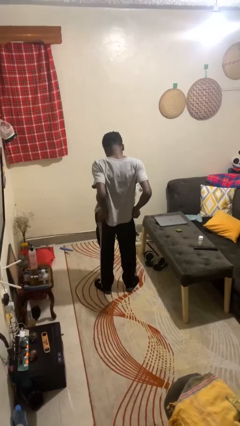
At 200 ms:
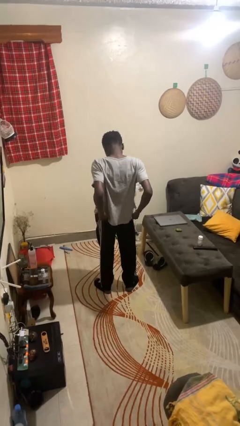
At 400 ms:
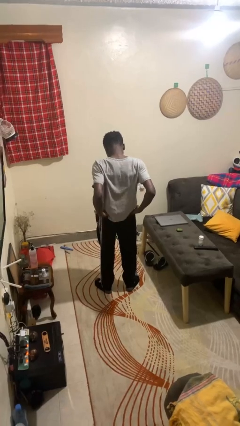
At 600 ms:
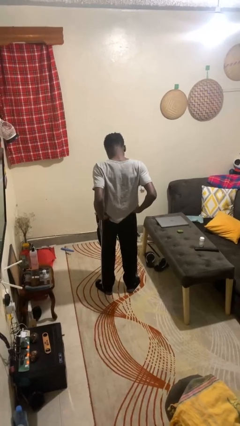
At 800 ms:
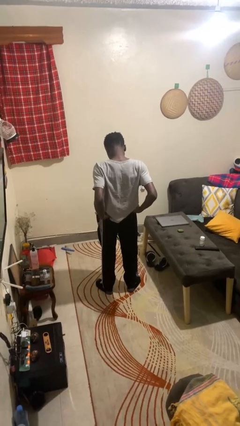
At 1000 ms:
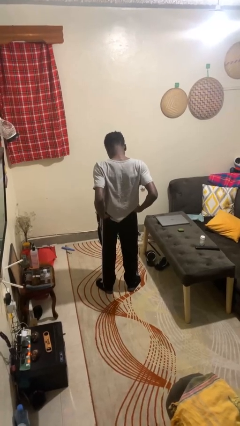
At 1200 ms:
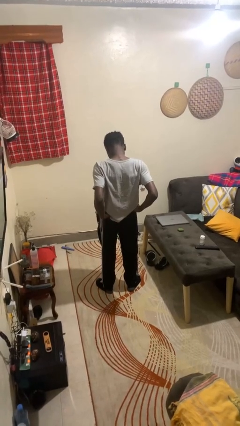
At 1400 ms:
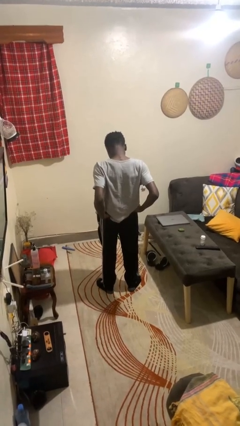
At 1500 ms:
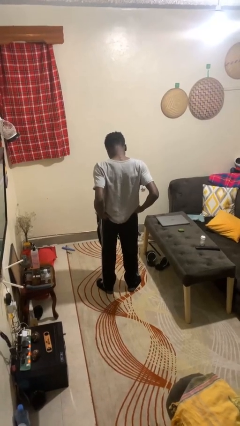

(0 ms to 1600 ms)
person puts hands in back pockets

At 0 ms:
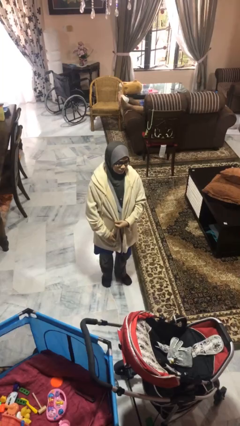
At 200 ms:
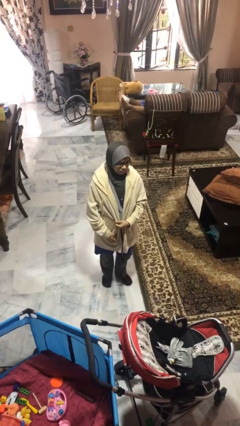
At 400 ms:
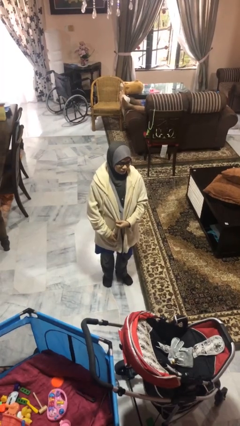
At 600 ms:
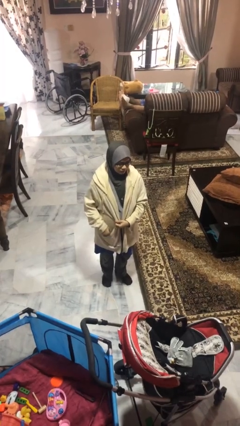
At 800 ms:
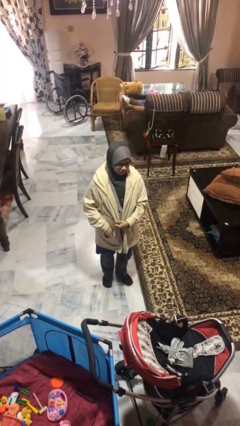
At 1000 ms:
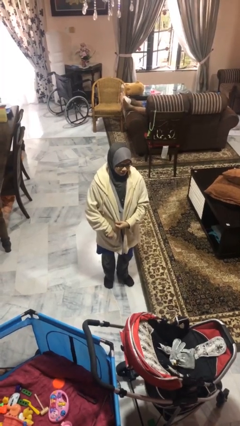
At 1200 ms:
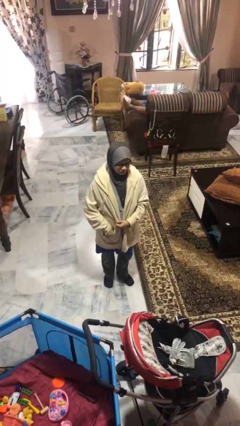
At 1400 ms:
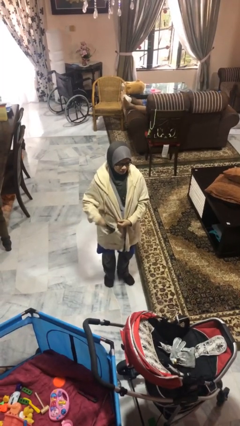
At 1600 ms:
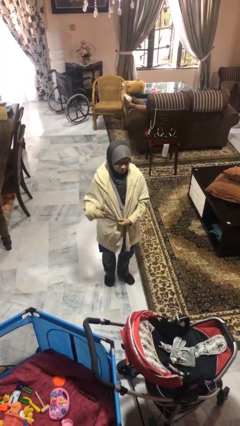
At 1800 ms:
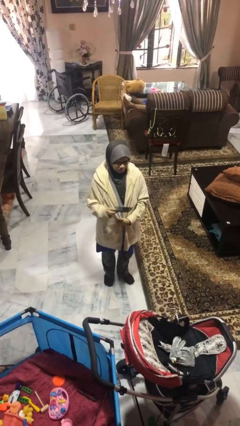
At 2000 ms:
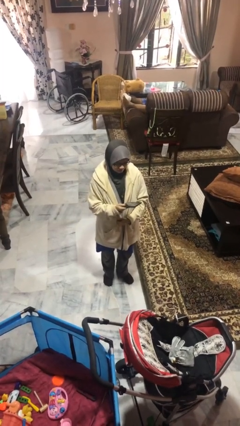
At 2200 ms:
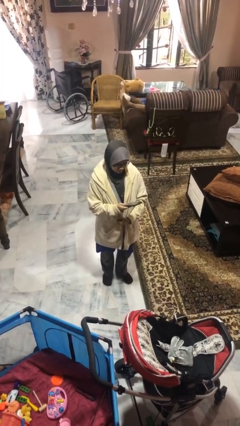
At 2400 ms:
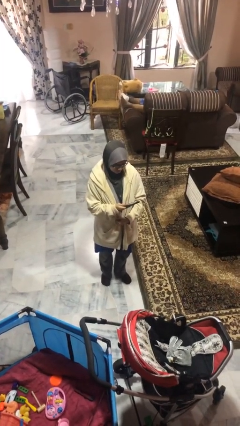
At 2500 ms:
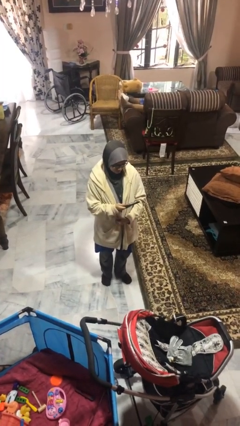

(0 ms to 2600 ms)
person takes phone from pocket

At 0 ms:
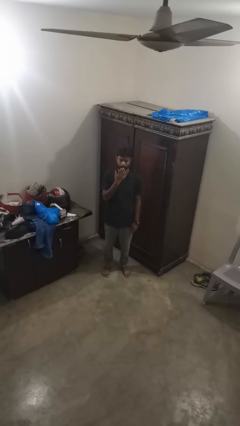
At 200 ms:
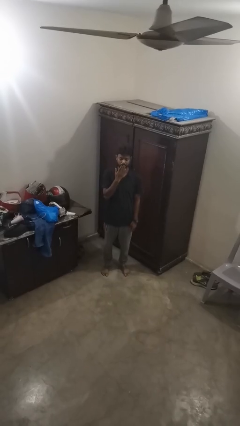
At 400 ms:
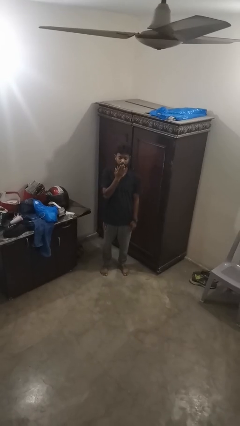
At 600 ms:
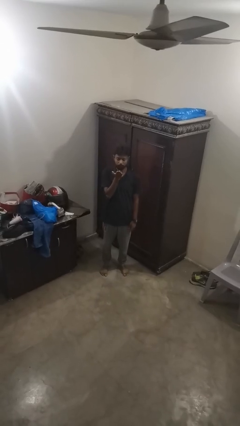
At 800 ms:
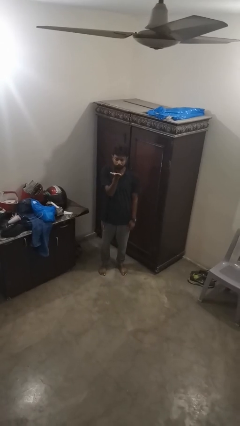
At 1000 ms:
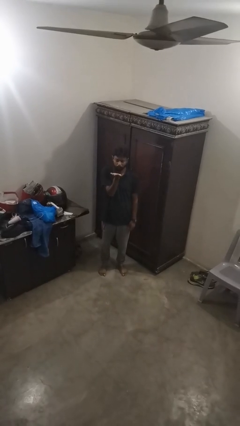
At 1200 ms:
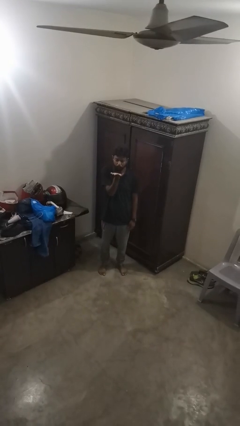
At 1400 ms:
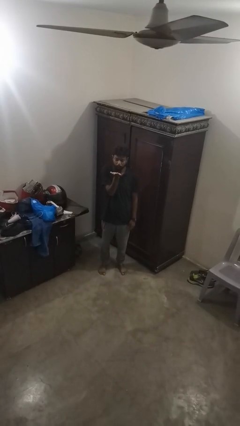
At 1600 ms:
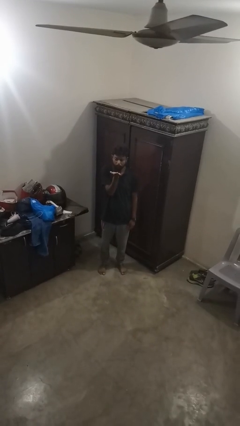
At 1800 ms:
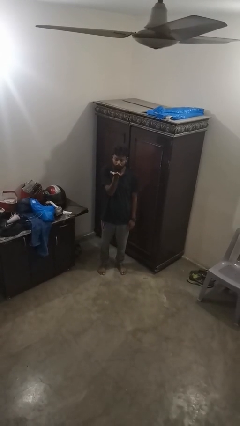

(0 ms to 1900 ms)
person gestures blow kiss

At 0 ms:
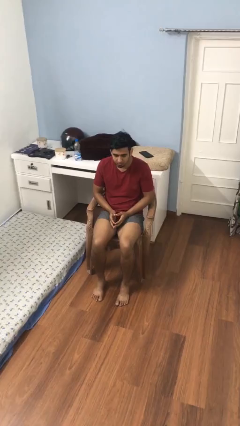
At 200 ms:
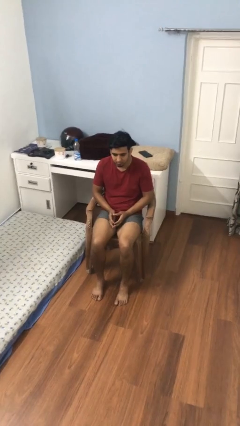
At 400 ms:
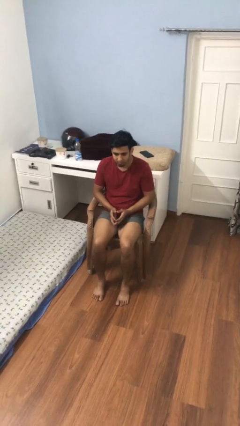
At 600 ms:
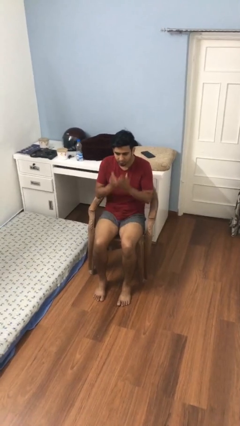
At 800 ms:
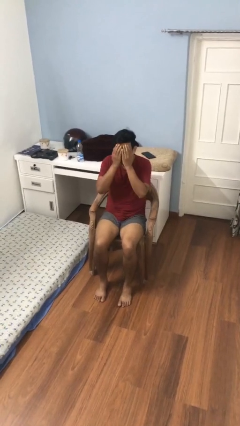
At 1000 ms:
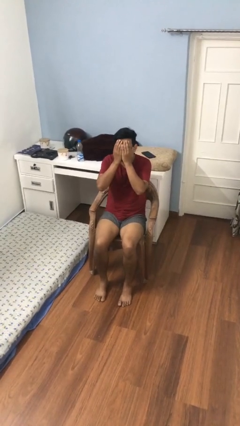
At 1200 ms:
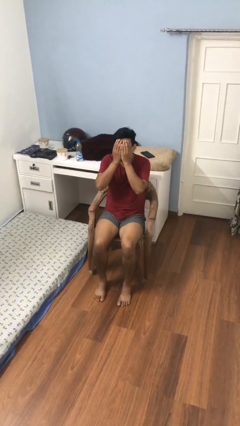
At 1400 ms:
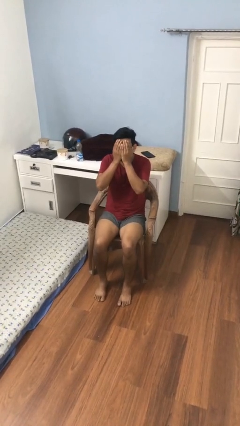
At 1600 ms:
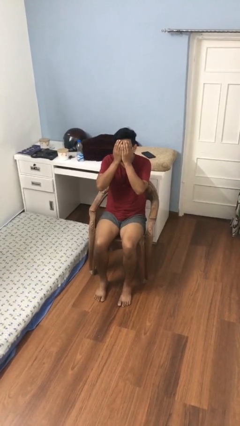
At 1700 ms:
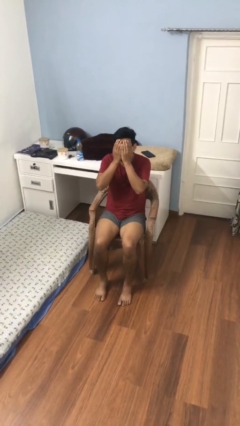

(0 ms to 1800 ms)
person covers face with hands

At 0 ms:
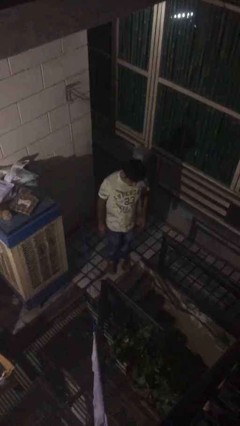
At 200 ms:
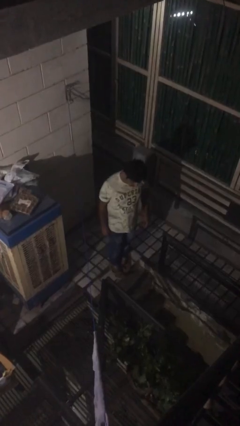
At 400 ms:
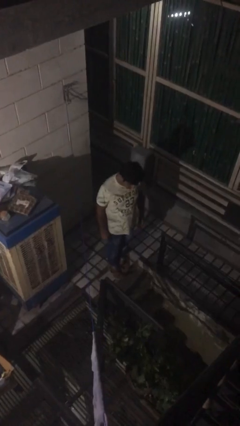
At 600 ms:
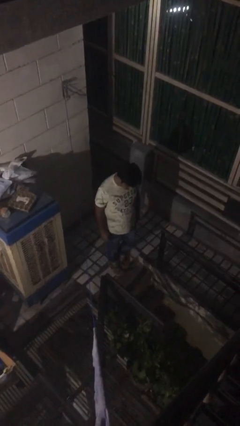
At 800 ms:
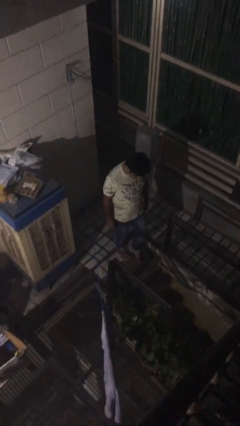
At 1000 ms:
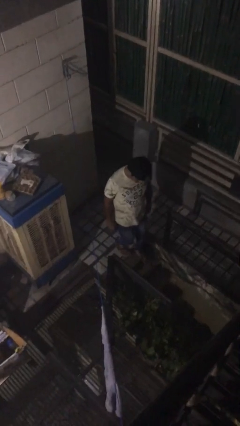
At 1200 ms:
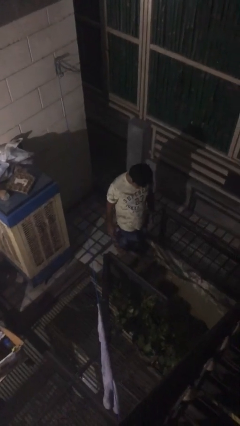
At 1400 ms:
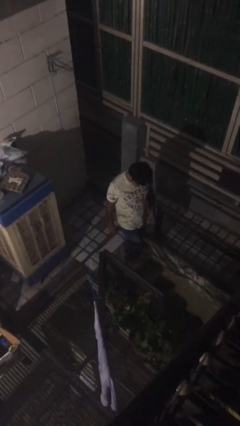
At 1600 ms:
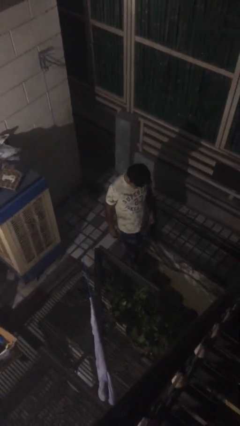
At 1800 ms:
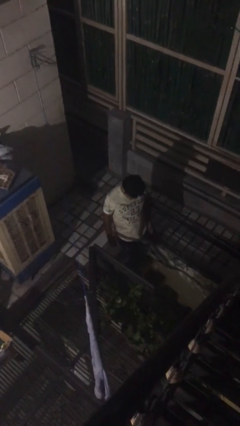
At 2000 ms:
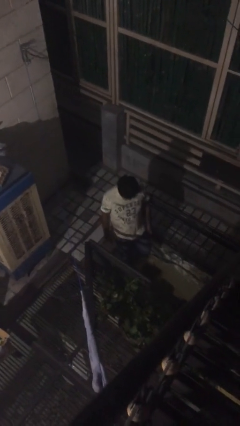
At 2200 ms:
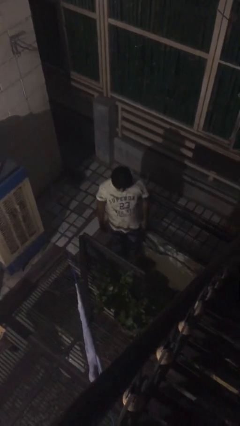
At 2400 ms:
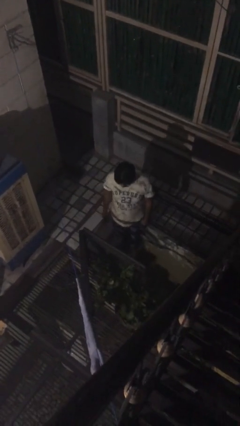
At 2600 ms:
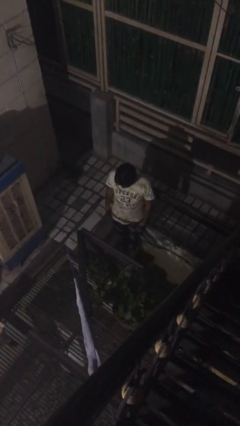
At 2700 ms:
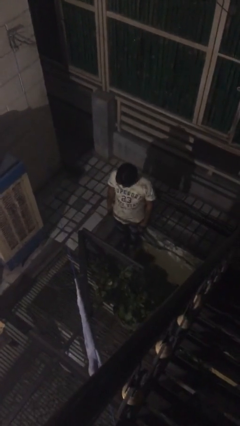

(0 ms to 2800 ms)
person climbs down stairs

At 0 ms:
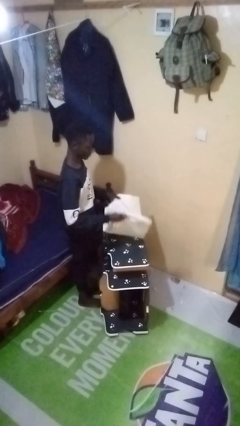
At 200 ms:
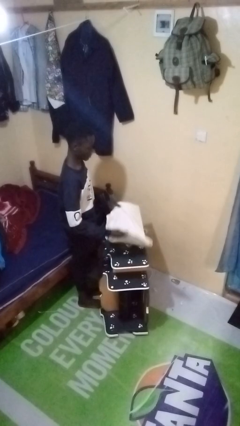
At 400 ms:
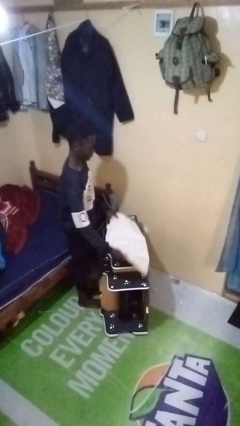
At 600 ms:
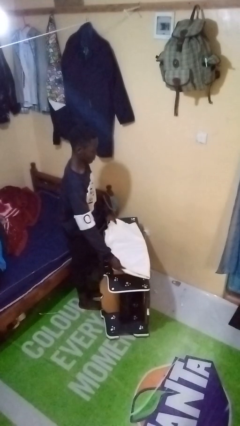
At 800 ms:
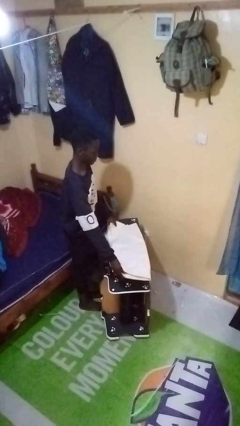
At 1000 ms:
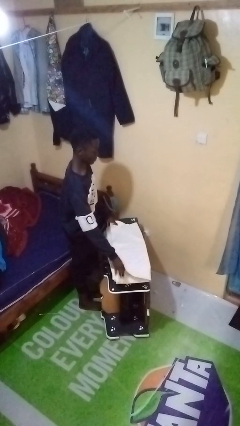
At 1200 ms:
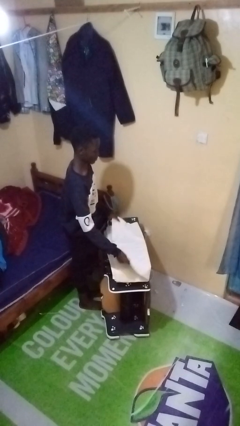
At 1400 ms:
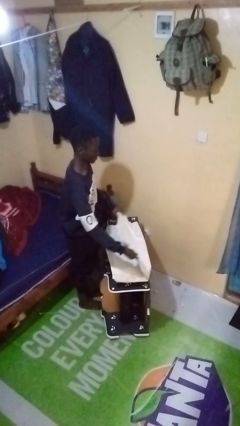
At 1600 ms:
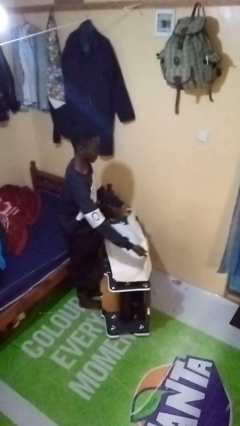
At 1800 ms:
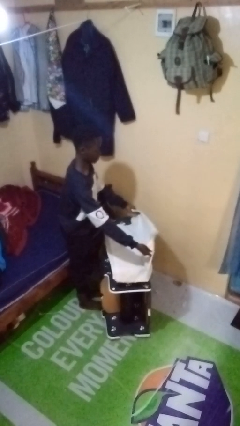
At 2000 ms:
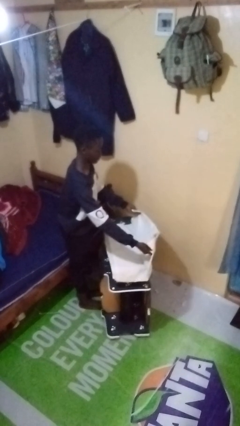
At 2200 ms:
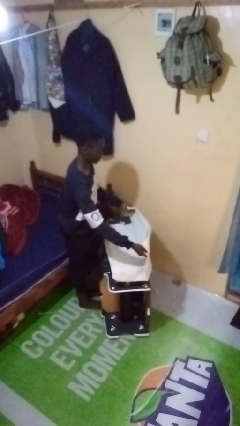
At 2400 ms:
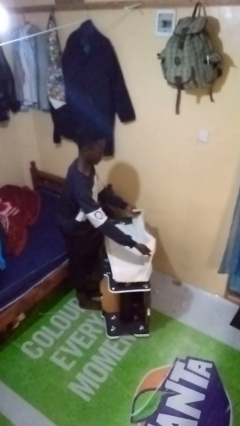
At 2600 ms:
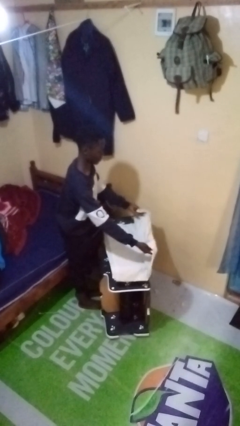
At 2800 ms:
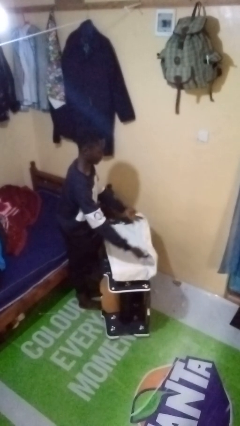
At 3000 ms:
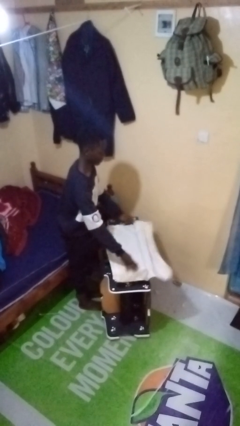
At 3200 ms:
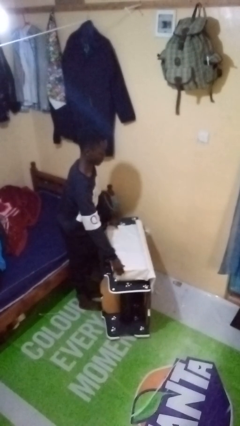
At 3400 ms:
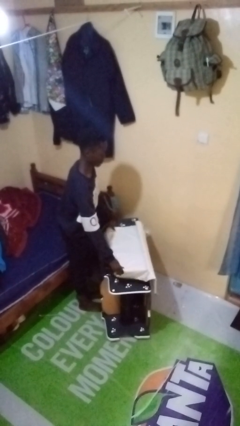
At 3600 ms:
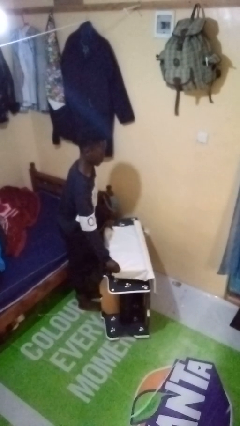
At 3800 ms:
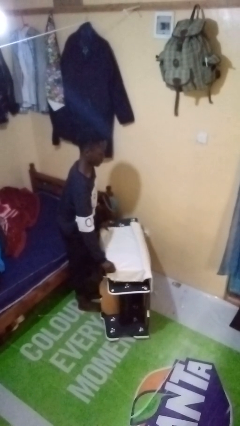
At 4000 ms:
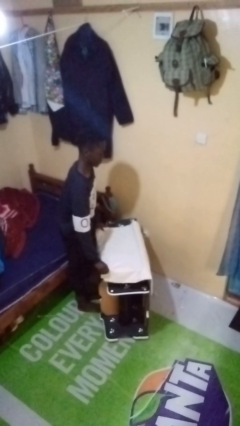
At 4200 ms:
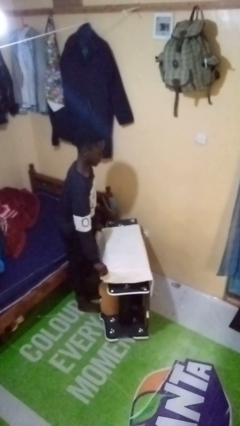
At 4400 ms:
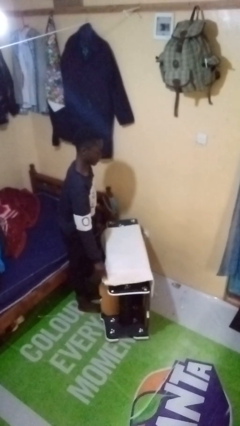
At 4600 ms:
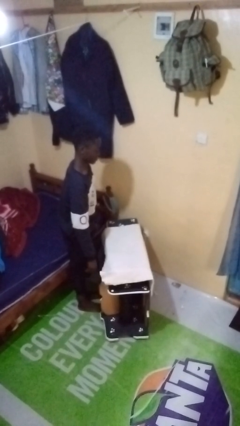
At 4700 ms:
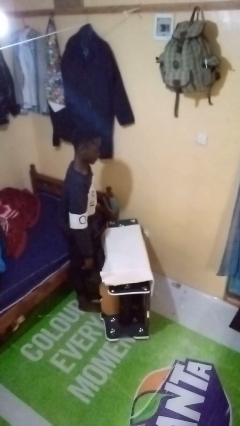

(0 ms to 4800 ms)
person spreads tablecloth

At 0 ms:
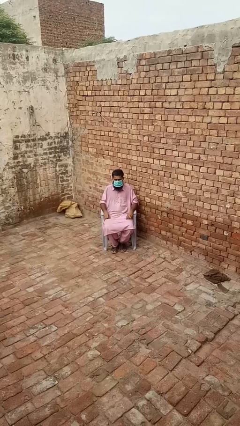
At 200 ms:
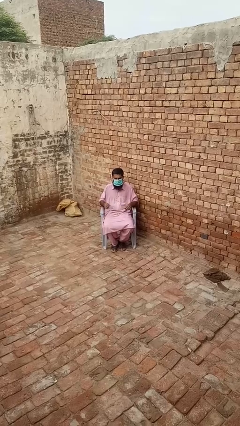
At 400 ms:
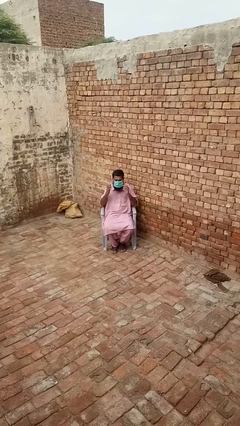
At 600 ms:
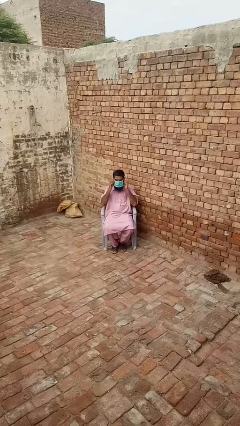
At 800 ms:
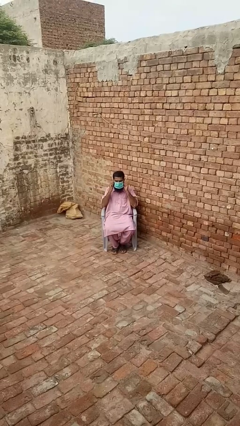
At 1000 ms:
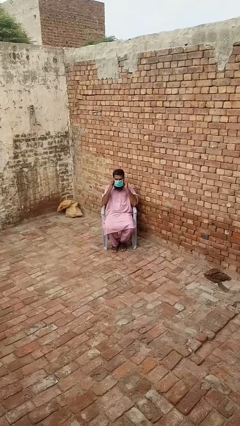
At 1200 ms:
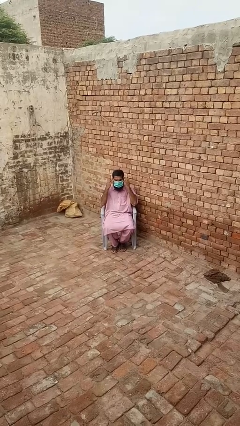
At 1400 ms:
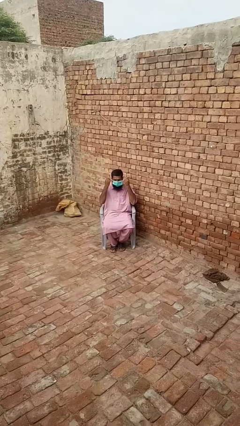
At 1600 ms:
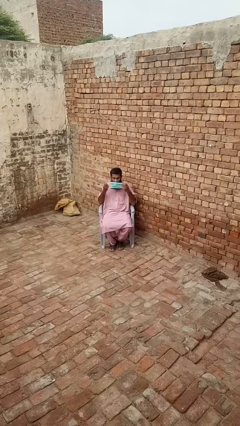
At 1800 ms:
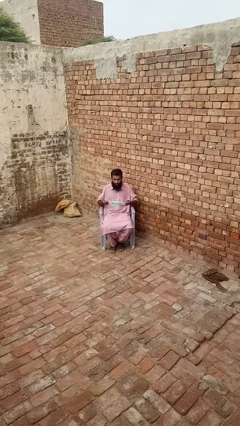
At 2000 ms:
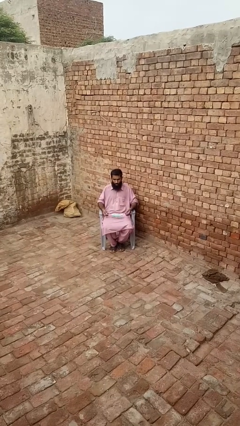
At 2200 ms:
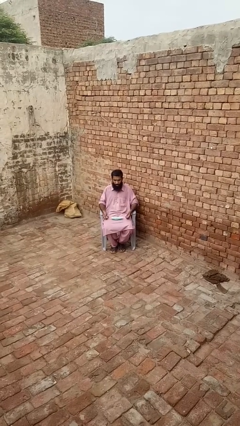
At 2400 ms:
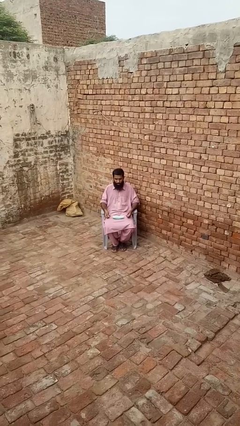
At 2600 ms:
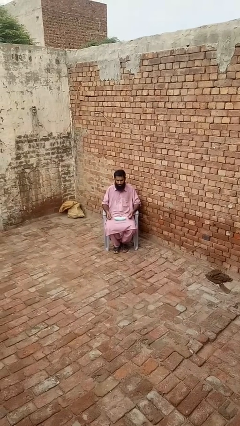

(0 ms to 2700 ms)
person takes off facemask
